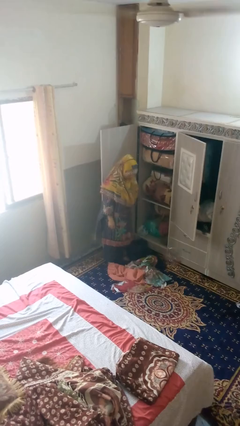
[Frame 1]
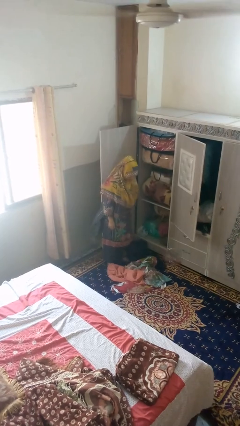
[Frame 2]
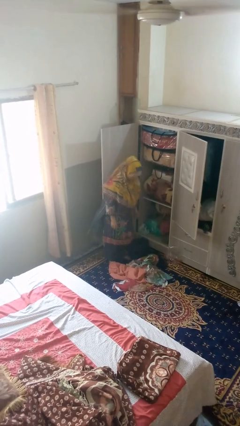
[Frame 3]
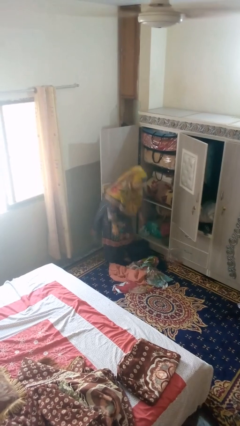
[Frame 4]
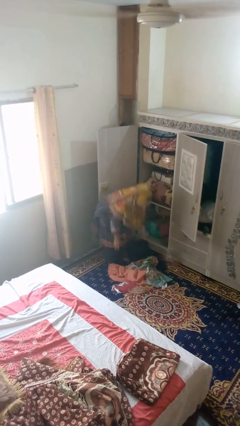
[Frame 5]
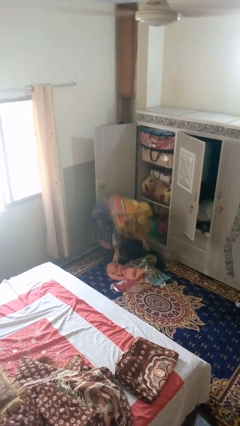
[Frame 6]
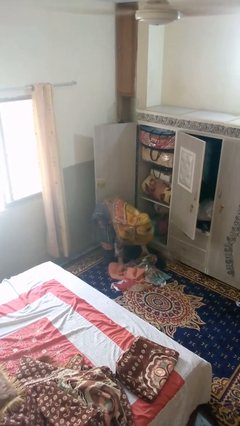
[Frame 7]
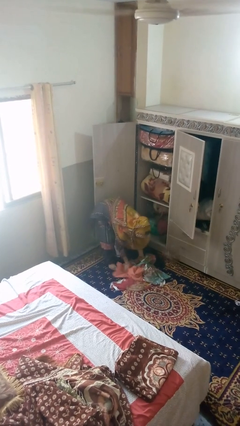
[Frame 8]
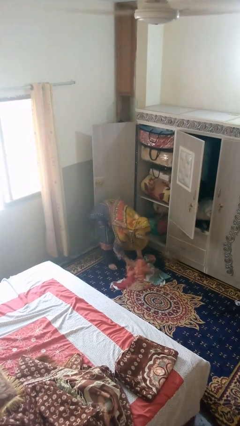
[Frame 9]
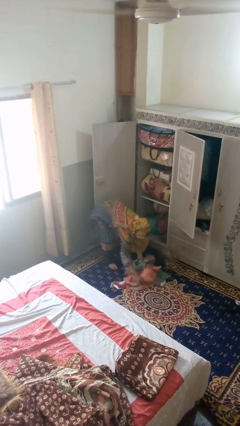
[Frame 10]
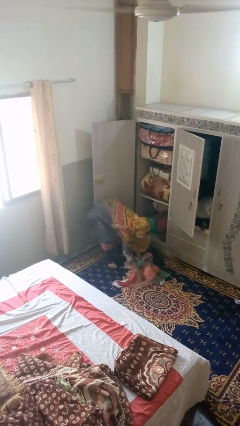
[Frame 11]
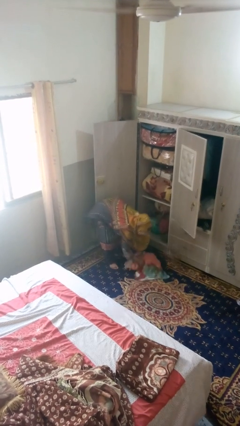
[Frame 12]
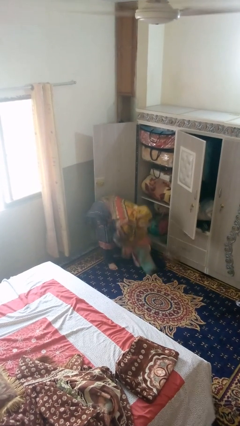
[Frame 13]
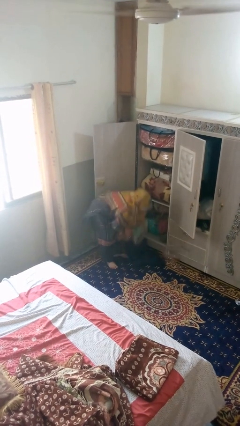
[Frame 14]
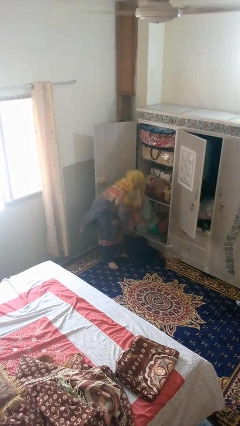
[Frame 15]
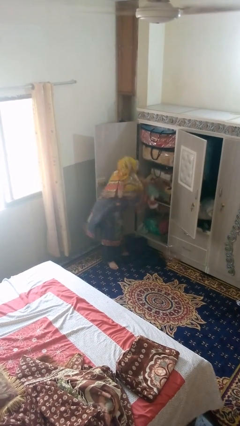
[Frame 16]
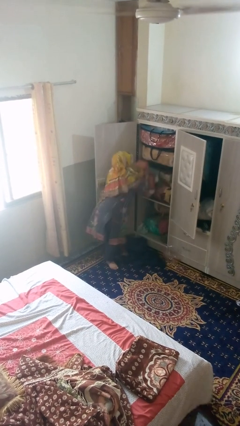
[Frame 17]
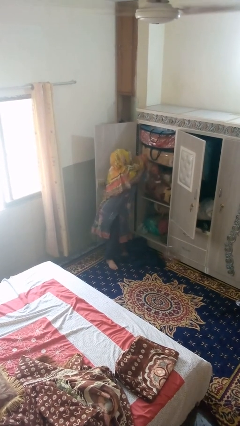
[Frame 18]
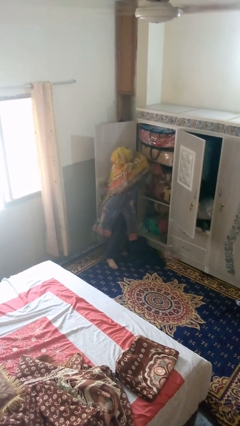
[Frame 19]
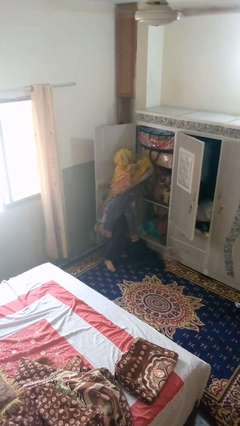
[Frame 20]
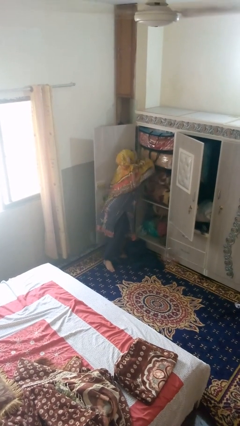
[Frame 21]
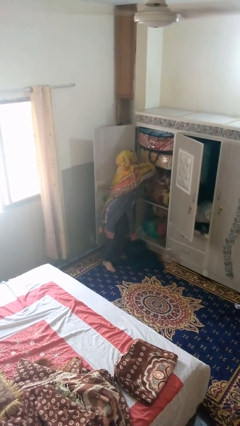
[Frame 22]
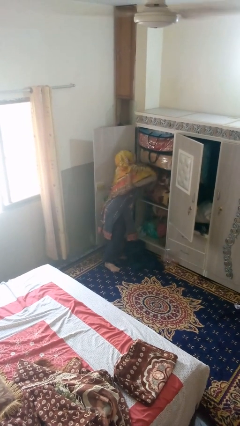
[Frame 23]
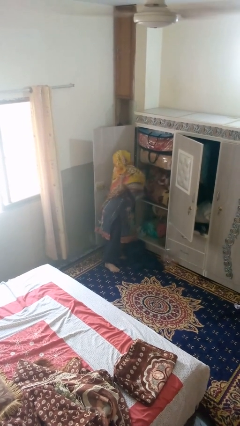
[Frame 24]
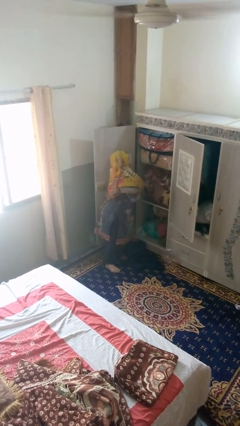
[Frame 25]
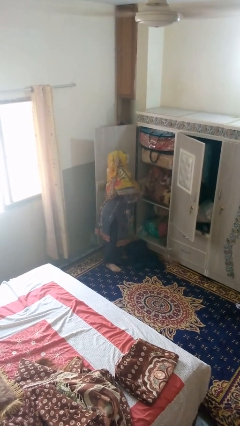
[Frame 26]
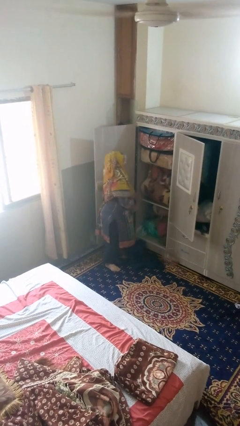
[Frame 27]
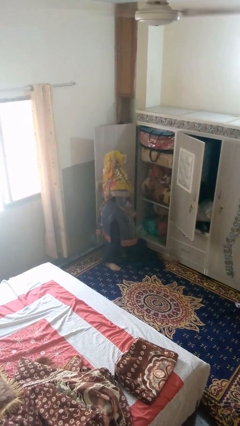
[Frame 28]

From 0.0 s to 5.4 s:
person takes clothes from dresser

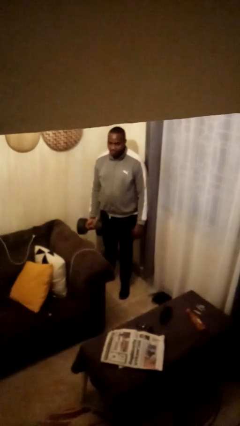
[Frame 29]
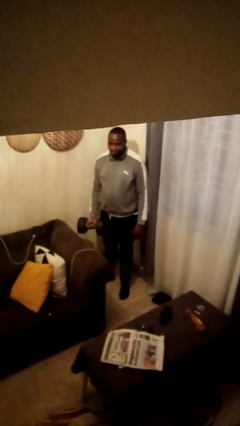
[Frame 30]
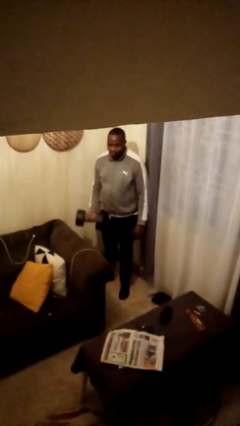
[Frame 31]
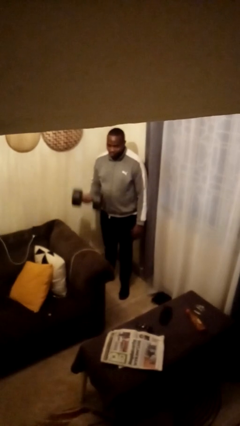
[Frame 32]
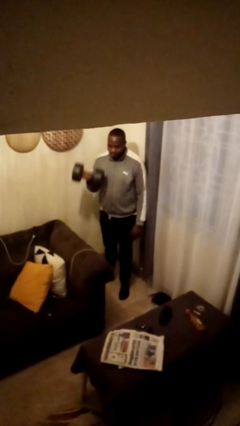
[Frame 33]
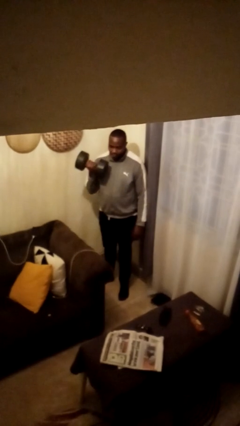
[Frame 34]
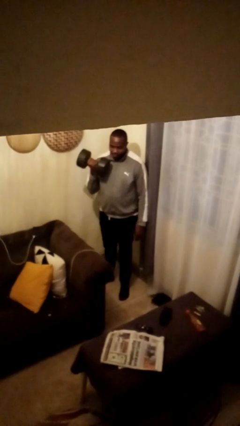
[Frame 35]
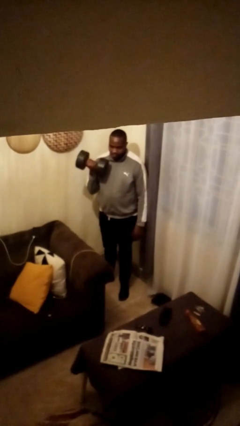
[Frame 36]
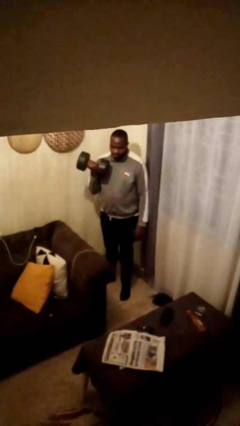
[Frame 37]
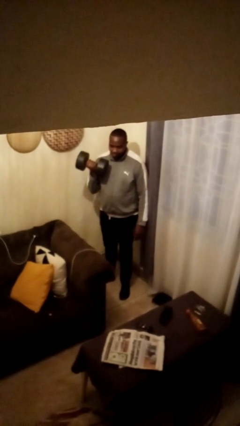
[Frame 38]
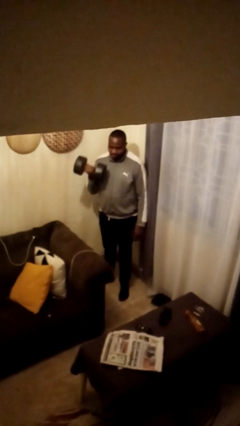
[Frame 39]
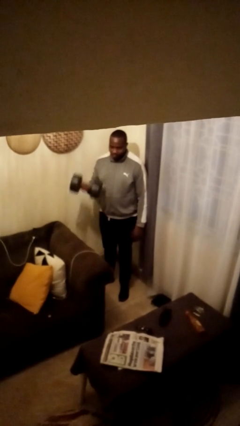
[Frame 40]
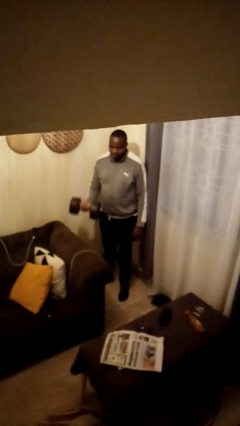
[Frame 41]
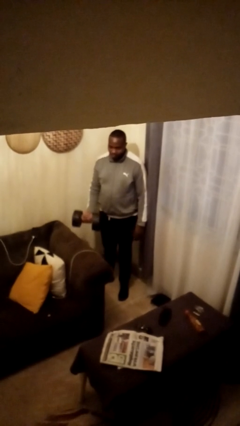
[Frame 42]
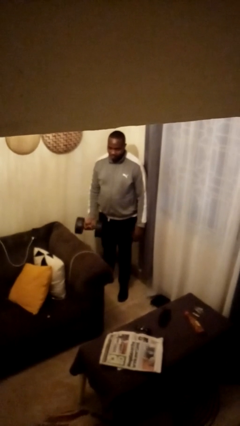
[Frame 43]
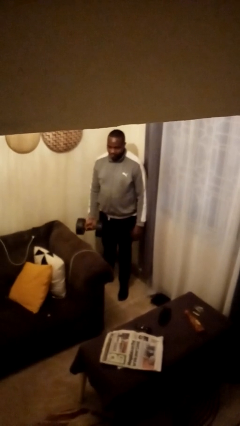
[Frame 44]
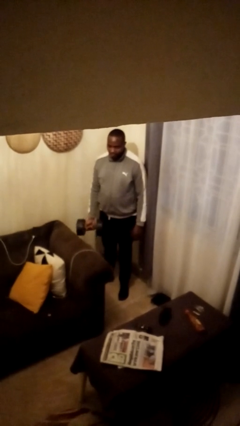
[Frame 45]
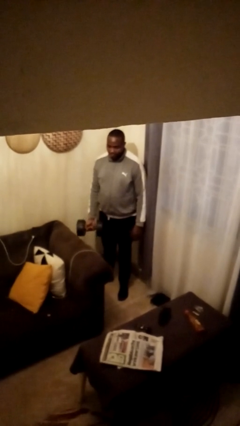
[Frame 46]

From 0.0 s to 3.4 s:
person lifts dumbbells

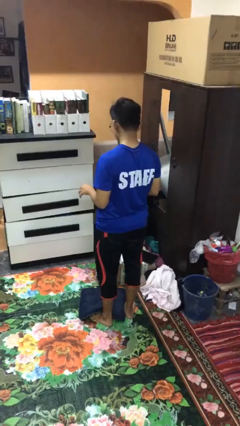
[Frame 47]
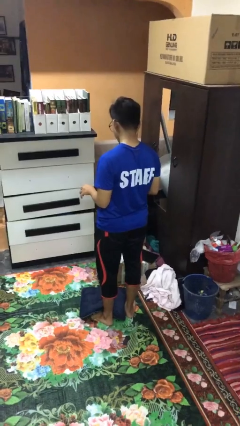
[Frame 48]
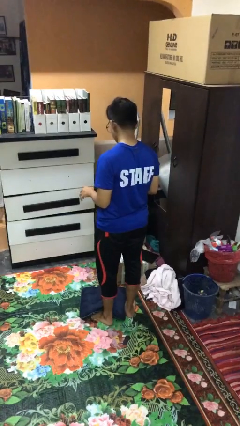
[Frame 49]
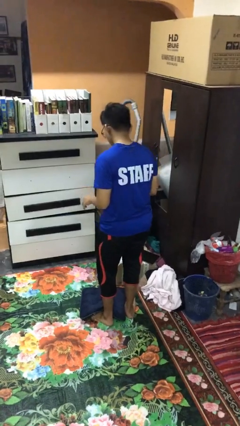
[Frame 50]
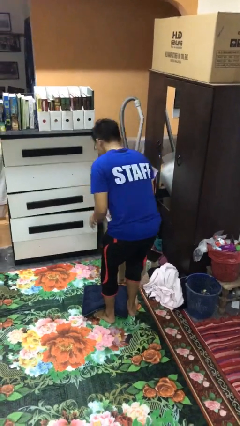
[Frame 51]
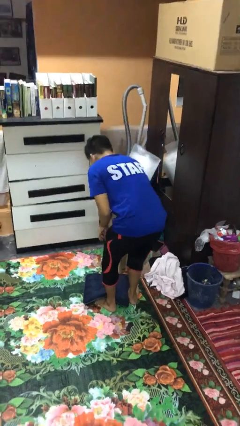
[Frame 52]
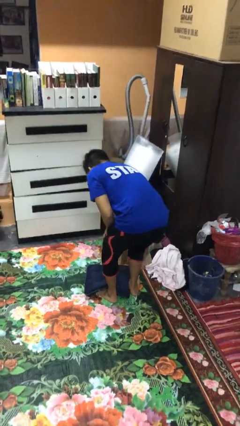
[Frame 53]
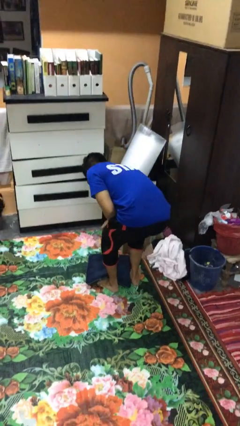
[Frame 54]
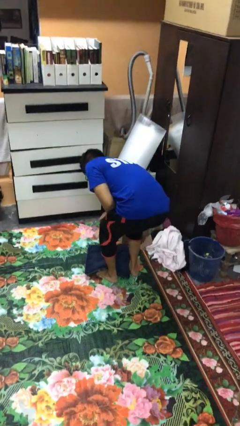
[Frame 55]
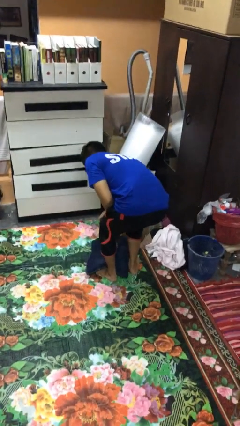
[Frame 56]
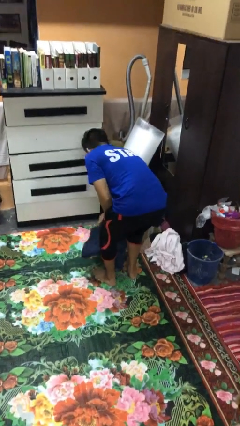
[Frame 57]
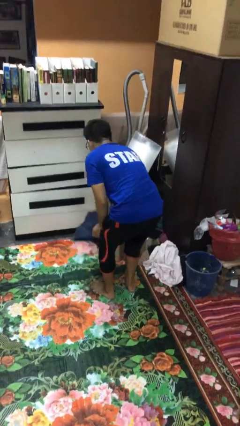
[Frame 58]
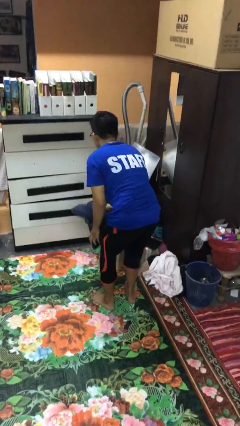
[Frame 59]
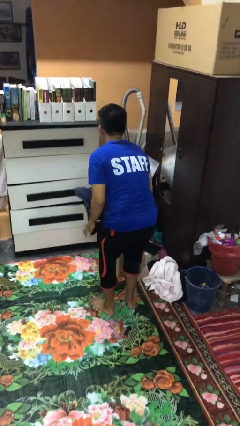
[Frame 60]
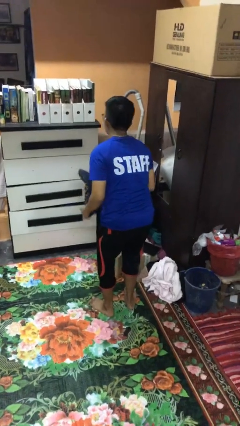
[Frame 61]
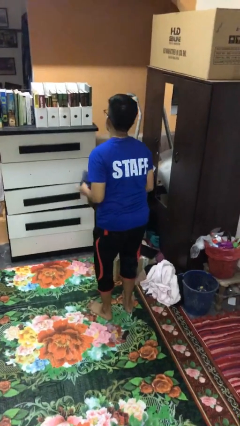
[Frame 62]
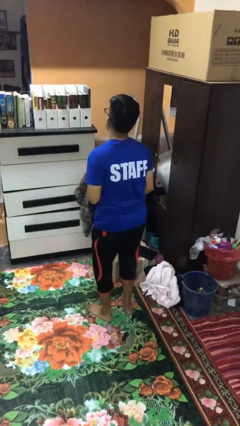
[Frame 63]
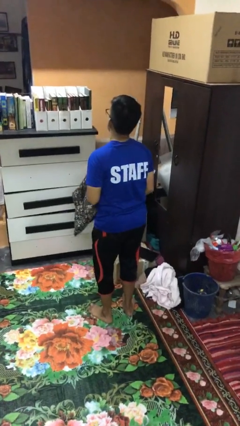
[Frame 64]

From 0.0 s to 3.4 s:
person picks up object from floor

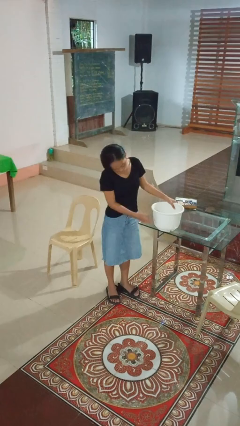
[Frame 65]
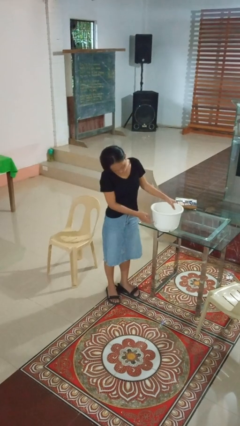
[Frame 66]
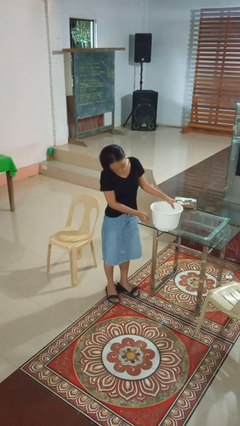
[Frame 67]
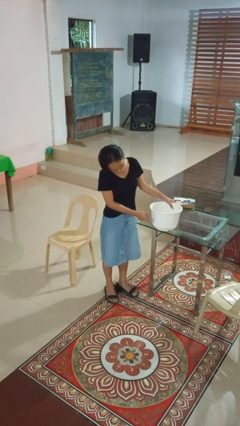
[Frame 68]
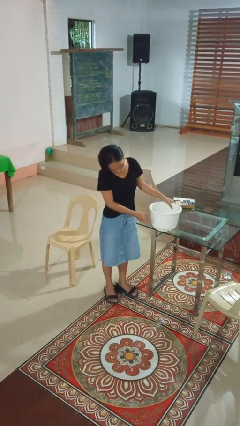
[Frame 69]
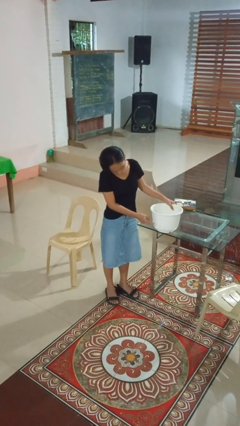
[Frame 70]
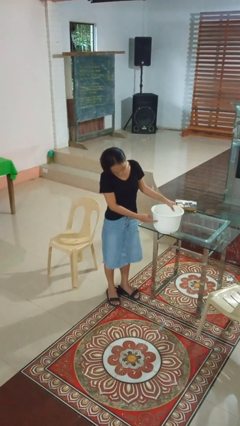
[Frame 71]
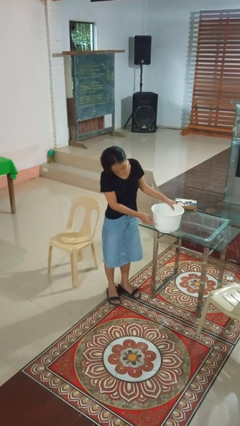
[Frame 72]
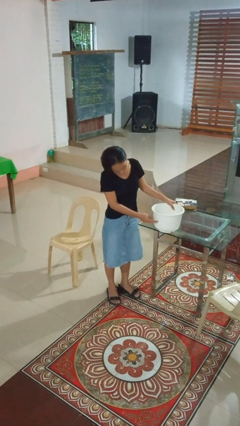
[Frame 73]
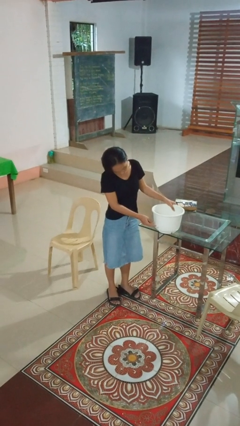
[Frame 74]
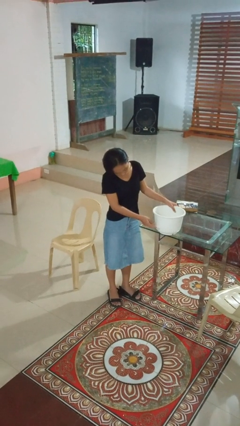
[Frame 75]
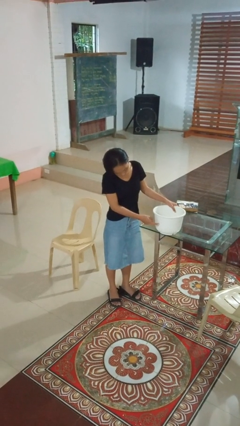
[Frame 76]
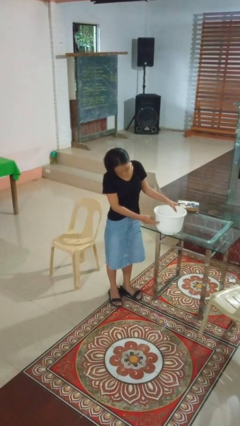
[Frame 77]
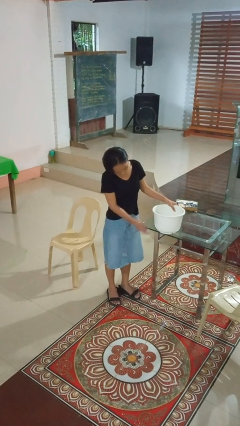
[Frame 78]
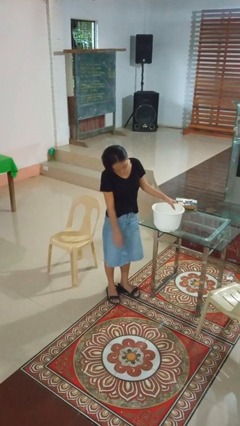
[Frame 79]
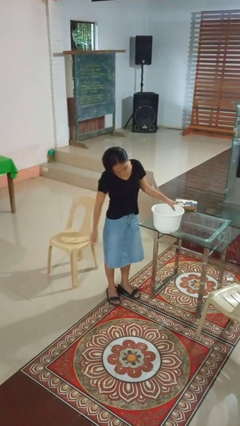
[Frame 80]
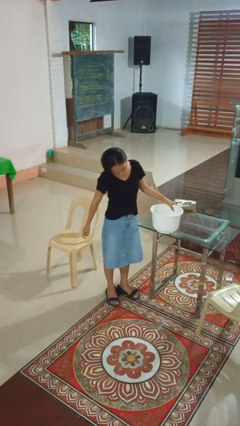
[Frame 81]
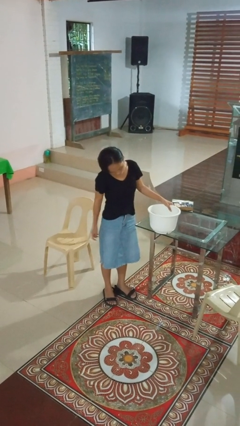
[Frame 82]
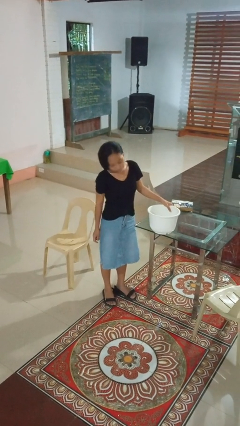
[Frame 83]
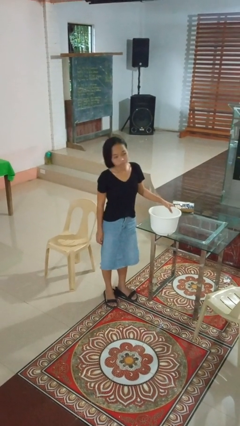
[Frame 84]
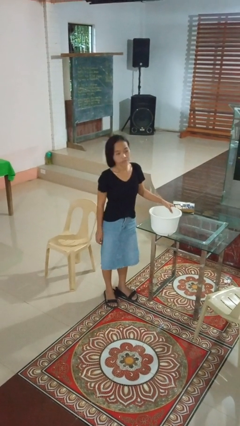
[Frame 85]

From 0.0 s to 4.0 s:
person taps object with finger

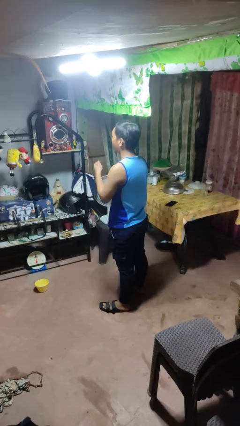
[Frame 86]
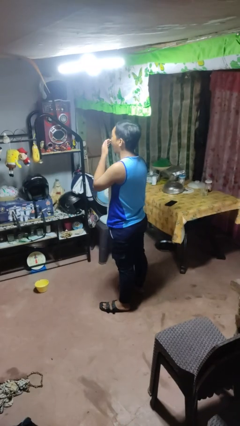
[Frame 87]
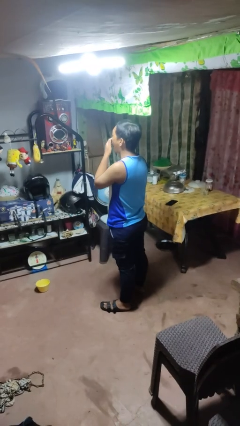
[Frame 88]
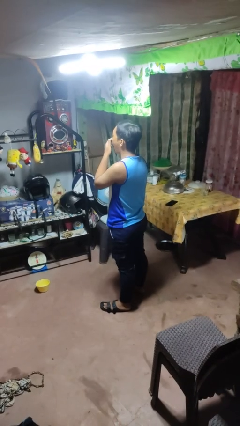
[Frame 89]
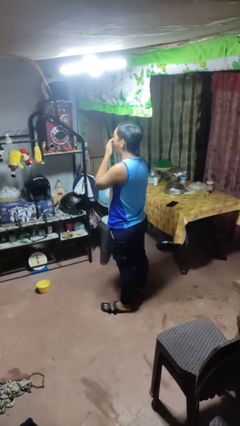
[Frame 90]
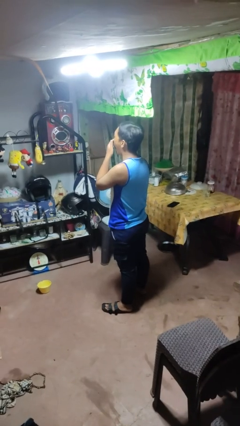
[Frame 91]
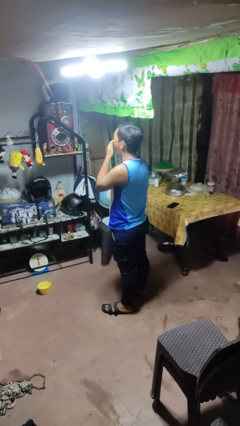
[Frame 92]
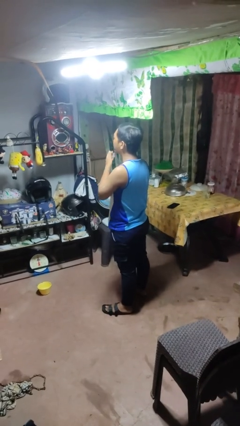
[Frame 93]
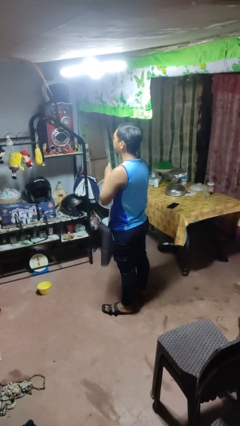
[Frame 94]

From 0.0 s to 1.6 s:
person yawns
